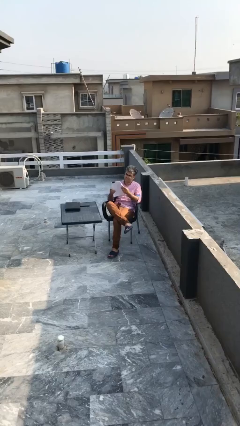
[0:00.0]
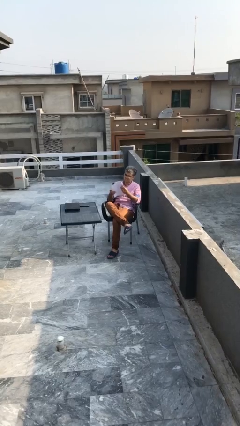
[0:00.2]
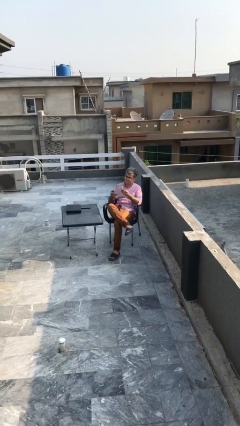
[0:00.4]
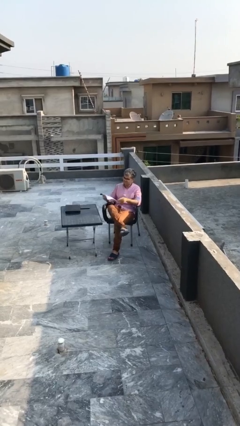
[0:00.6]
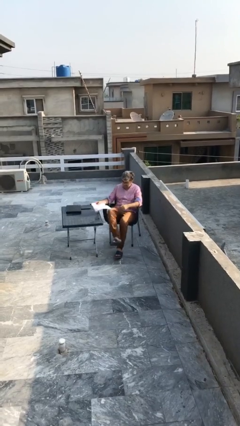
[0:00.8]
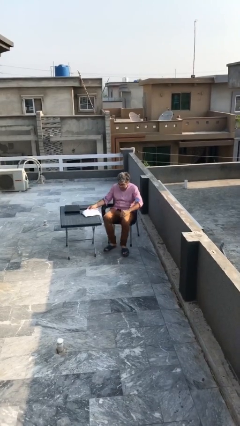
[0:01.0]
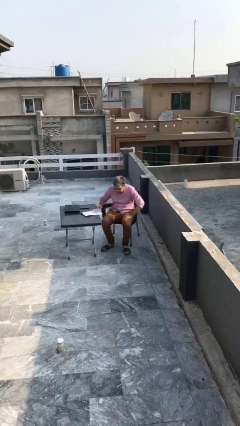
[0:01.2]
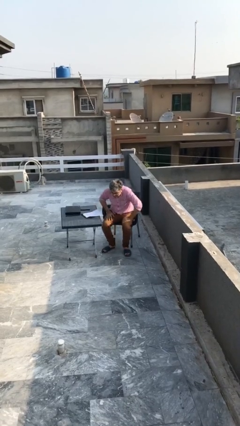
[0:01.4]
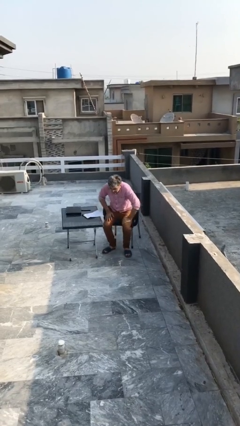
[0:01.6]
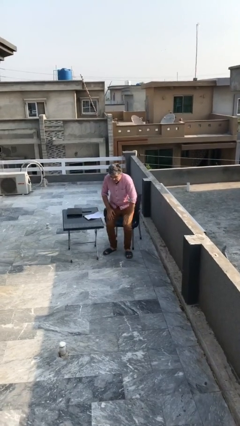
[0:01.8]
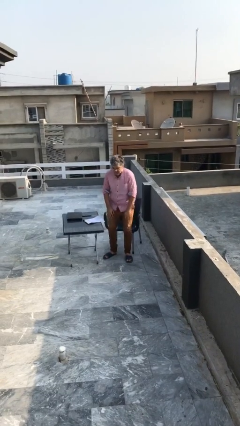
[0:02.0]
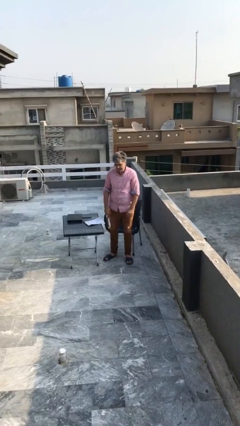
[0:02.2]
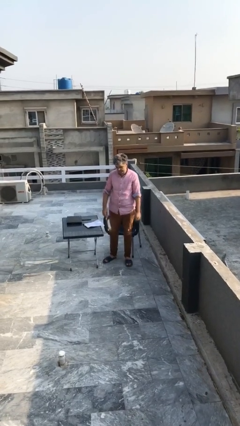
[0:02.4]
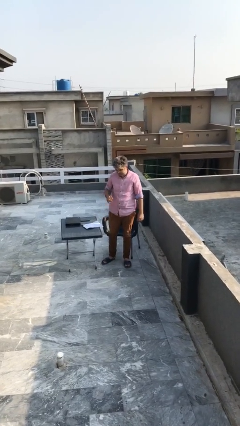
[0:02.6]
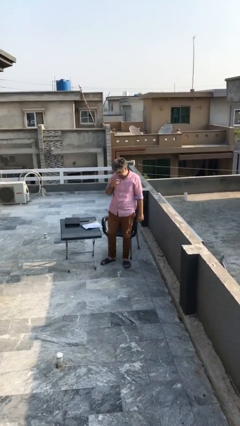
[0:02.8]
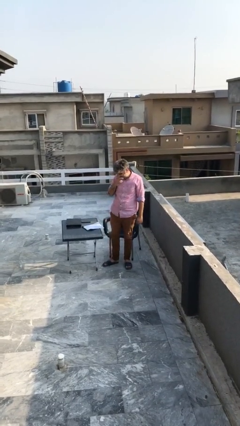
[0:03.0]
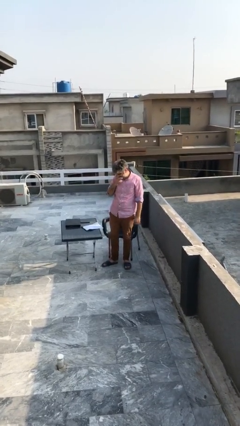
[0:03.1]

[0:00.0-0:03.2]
person stands up

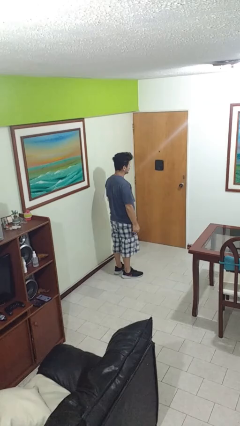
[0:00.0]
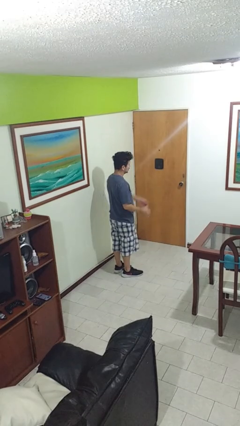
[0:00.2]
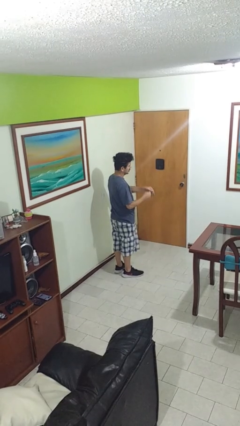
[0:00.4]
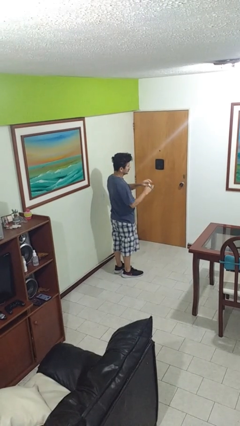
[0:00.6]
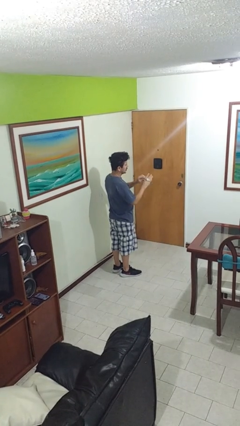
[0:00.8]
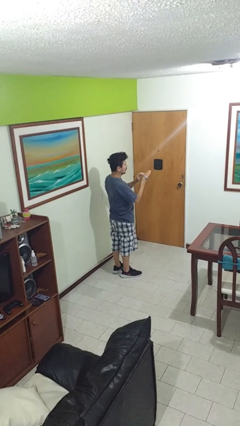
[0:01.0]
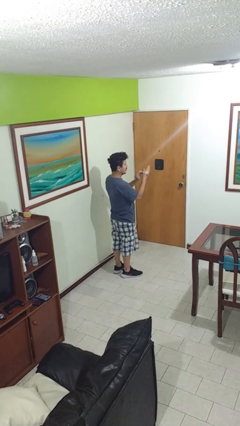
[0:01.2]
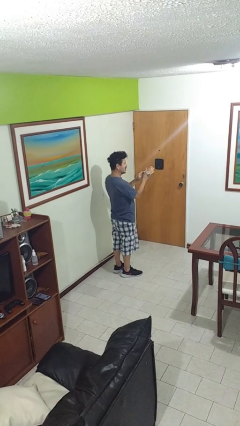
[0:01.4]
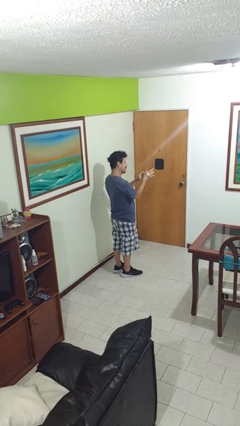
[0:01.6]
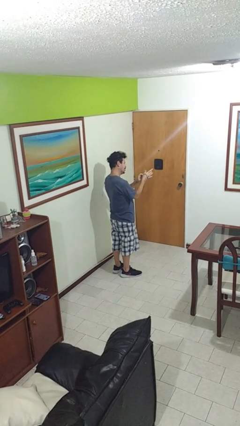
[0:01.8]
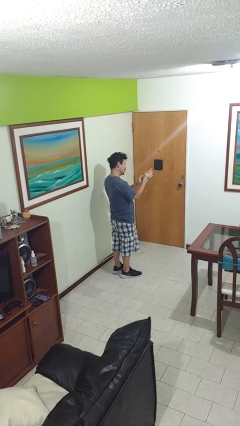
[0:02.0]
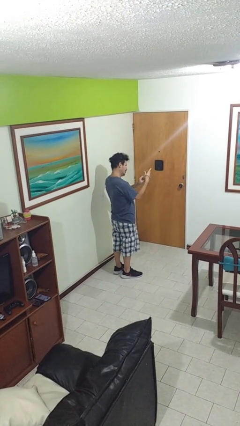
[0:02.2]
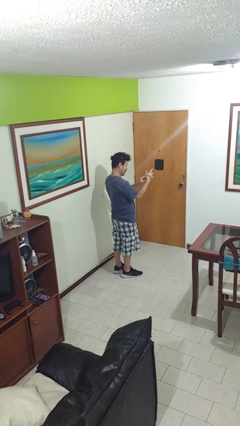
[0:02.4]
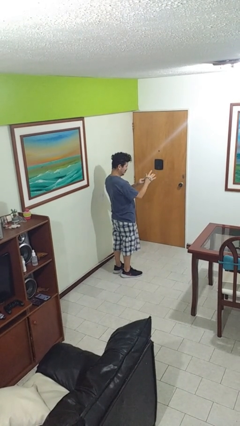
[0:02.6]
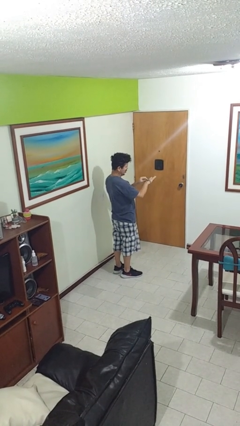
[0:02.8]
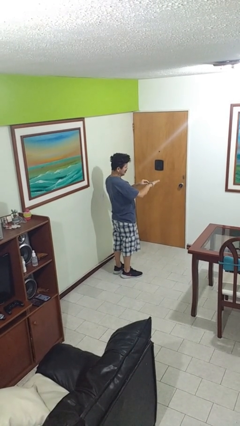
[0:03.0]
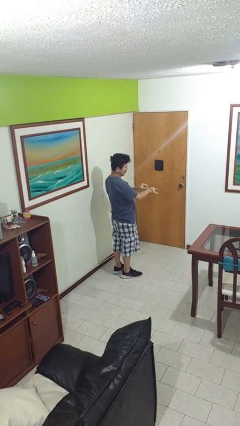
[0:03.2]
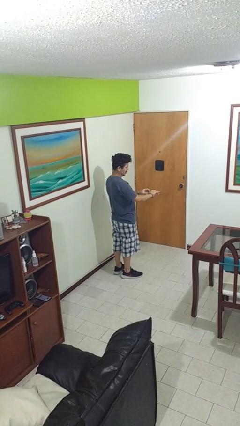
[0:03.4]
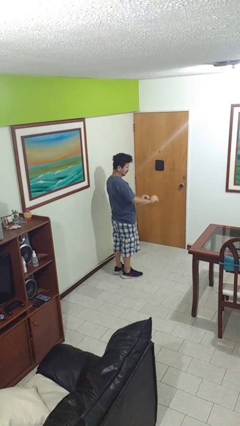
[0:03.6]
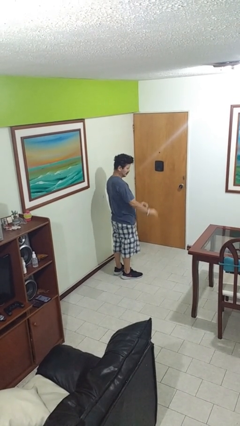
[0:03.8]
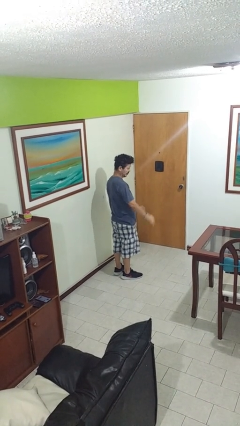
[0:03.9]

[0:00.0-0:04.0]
person puts on wristwatch

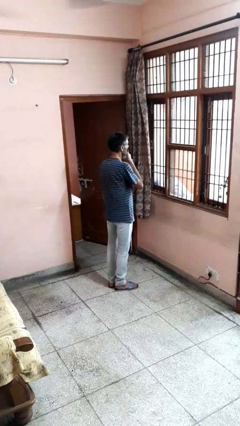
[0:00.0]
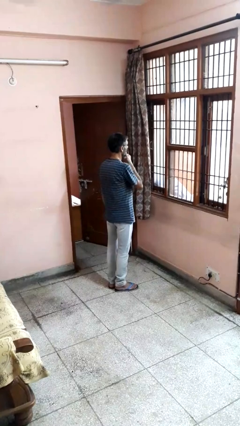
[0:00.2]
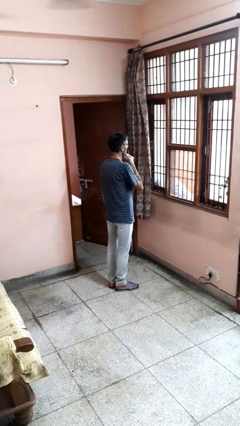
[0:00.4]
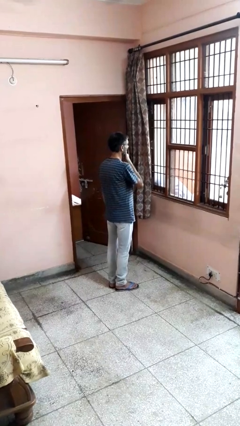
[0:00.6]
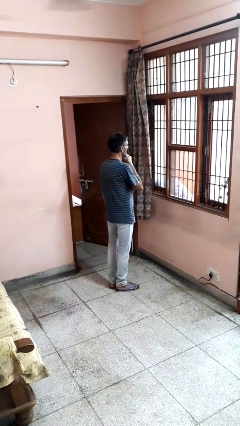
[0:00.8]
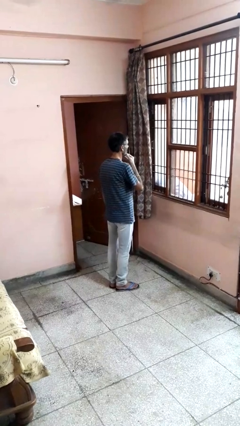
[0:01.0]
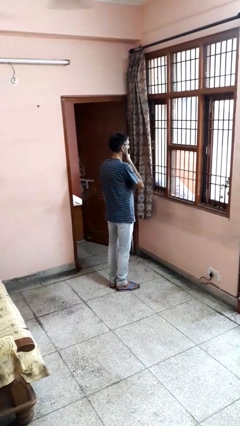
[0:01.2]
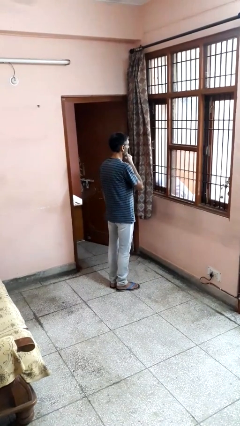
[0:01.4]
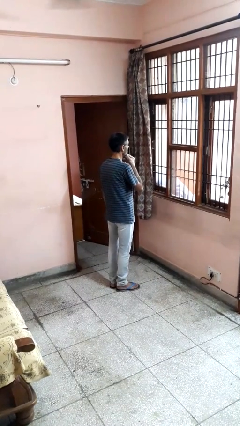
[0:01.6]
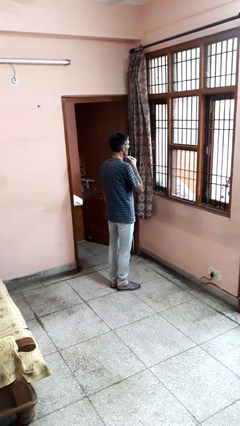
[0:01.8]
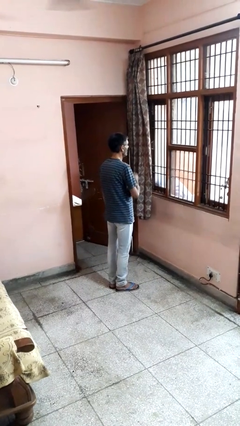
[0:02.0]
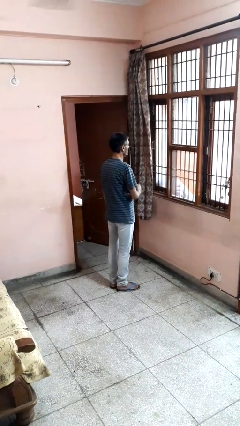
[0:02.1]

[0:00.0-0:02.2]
person strokes chin

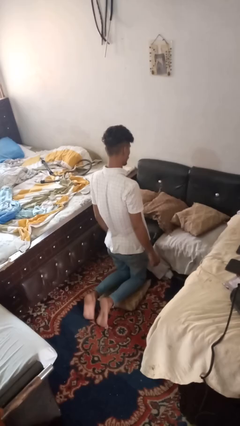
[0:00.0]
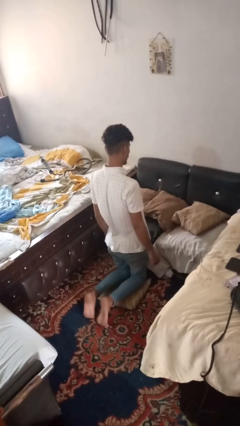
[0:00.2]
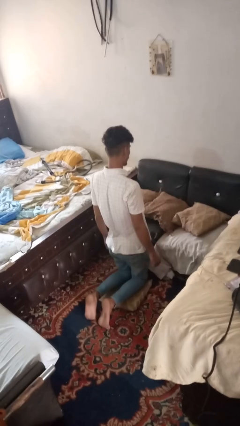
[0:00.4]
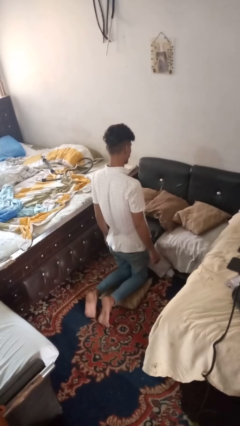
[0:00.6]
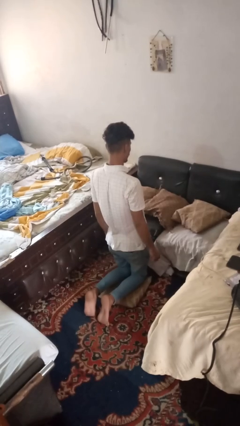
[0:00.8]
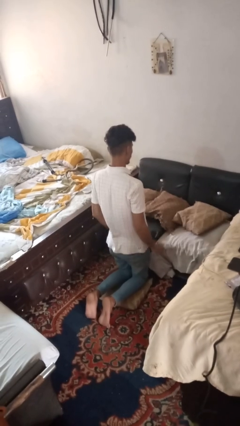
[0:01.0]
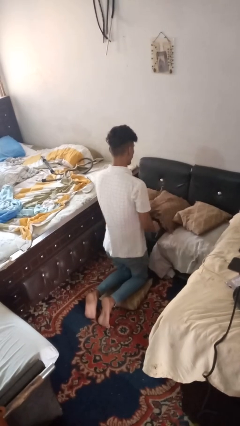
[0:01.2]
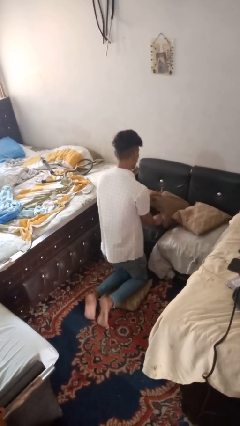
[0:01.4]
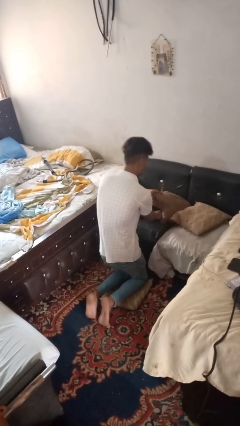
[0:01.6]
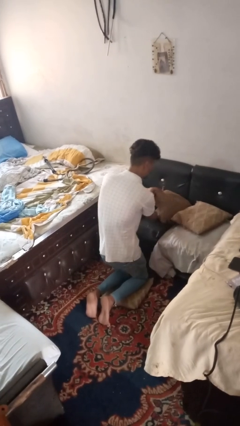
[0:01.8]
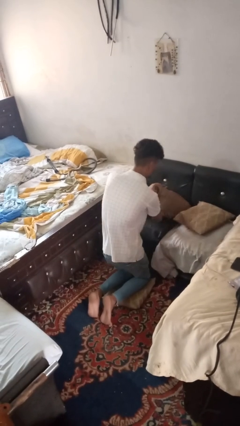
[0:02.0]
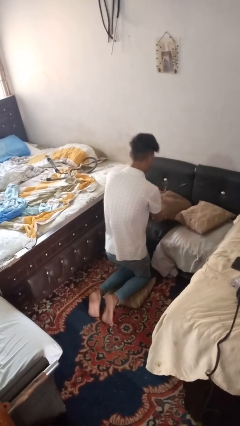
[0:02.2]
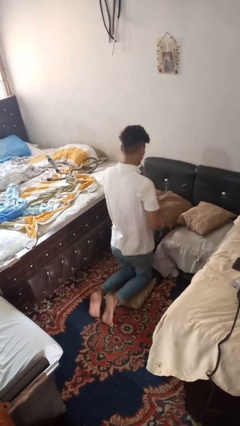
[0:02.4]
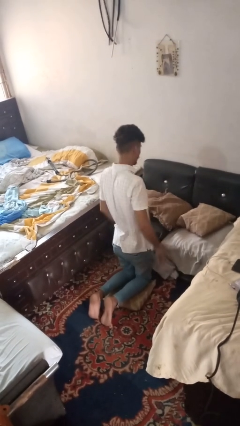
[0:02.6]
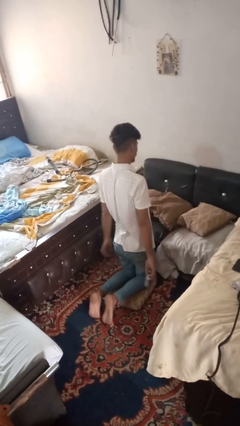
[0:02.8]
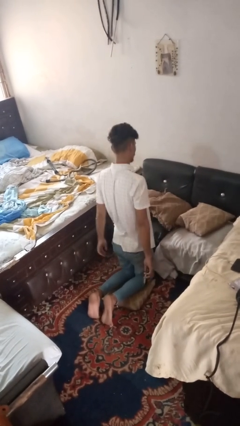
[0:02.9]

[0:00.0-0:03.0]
person searches in couch

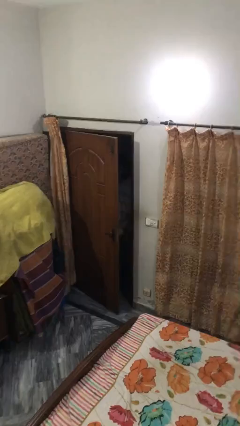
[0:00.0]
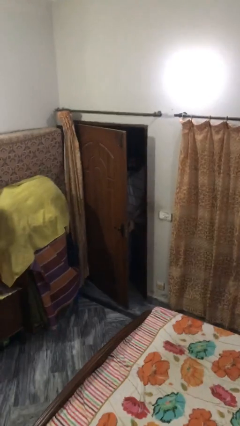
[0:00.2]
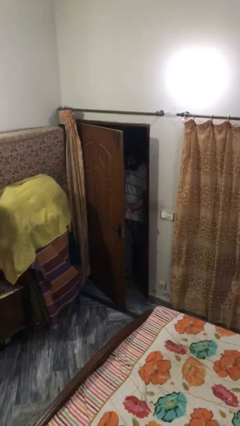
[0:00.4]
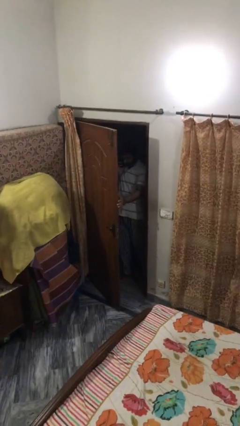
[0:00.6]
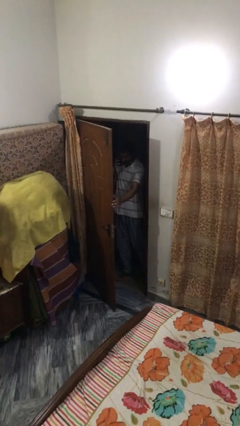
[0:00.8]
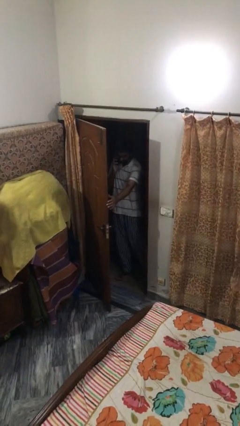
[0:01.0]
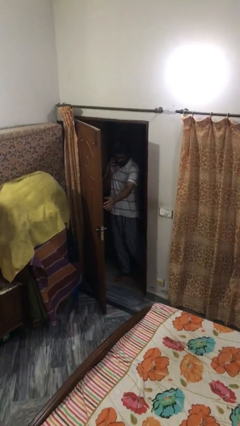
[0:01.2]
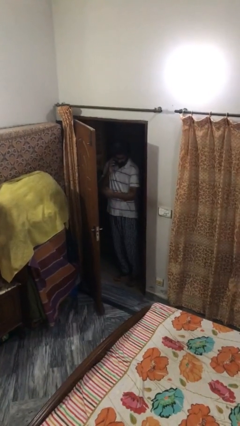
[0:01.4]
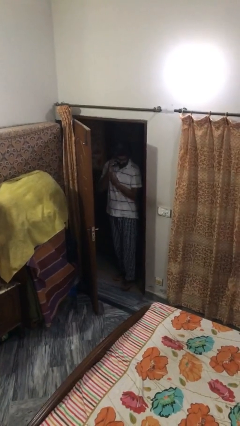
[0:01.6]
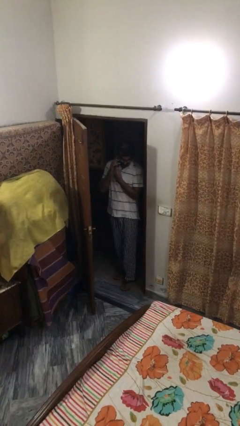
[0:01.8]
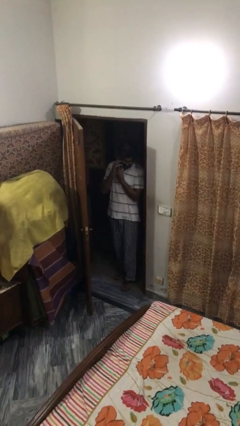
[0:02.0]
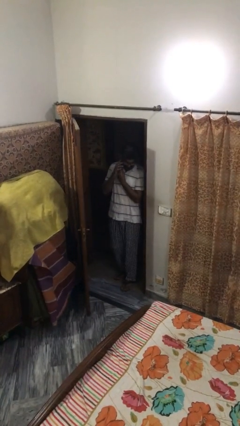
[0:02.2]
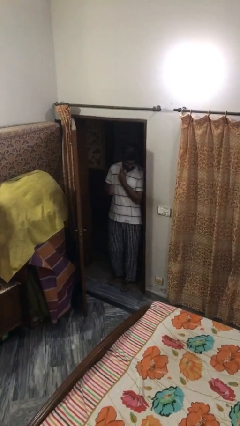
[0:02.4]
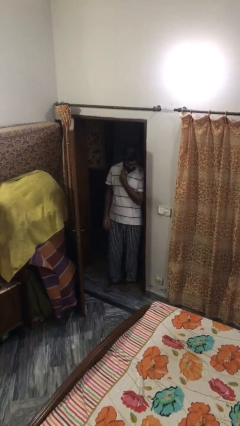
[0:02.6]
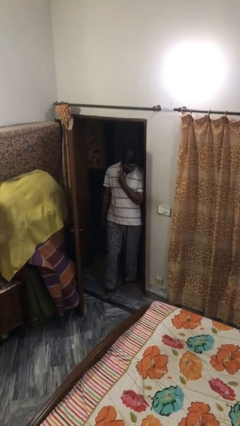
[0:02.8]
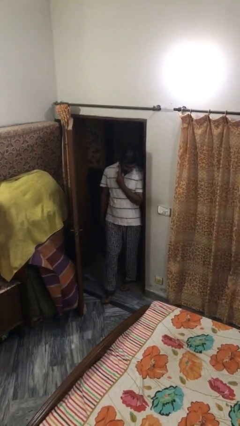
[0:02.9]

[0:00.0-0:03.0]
person opens facility door

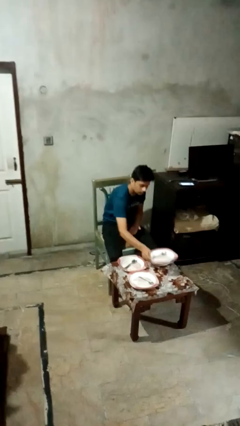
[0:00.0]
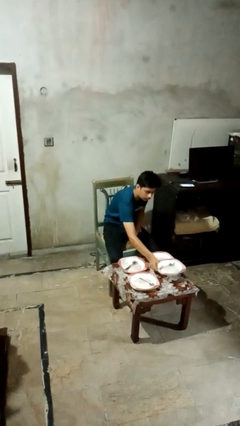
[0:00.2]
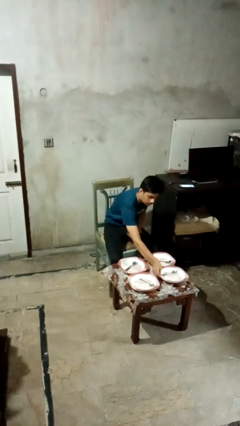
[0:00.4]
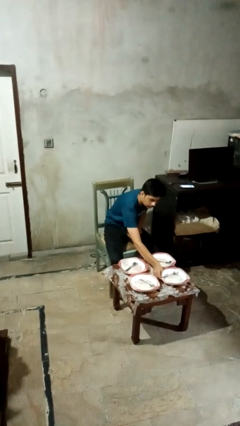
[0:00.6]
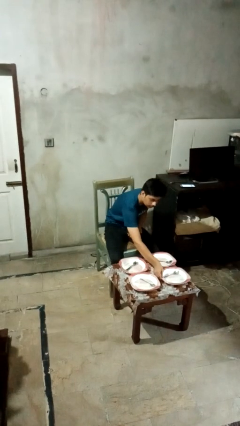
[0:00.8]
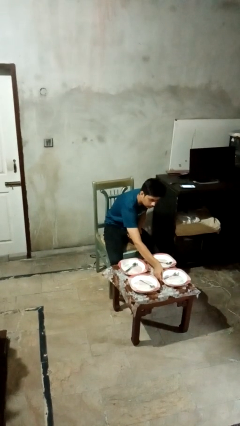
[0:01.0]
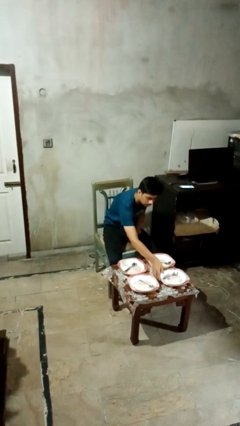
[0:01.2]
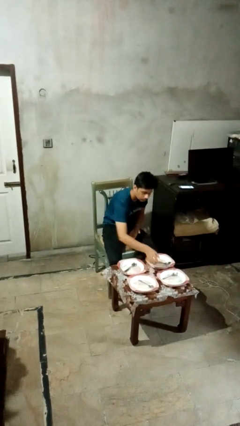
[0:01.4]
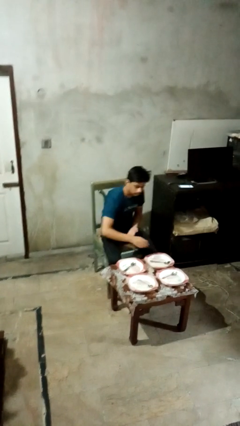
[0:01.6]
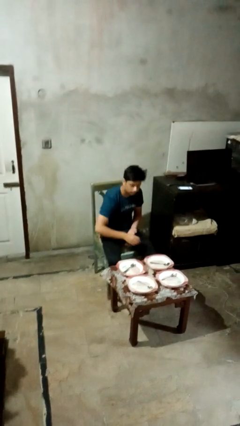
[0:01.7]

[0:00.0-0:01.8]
person sets table
